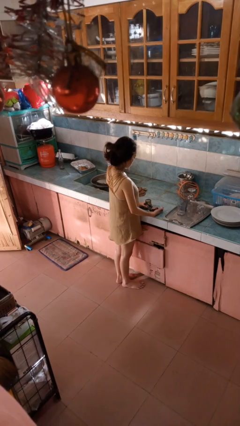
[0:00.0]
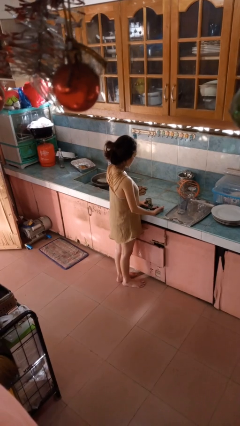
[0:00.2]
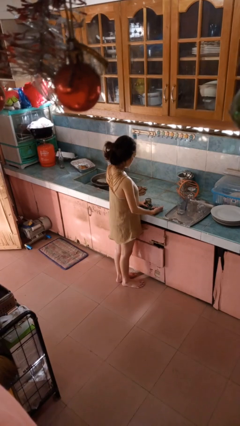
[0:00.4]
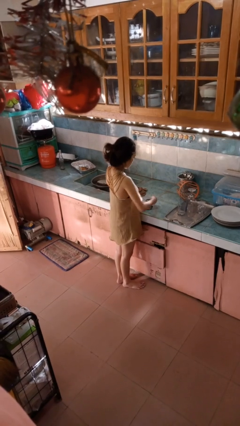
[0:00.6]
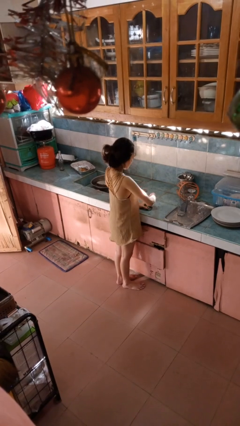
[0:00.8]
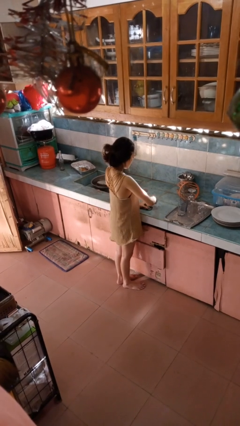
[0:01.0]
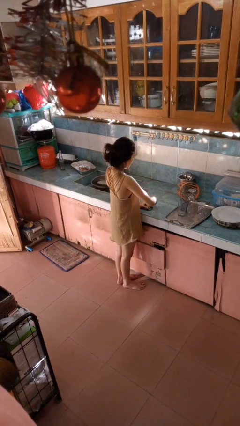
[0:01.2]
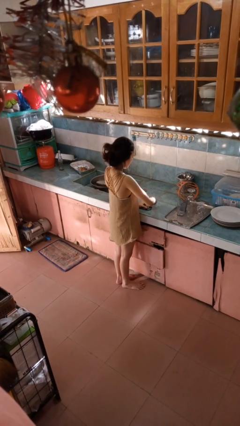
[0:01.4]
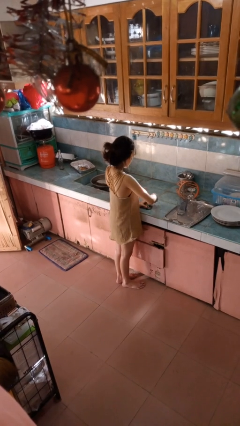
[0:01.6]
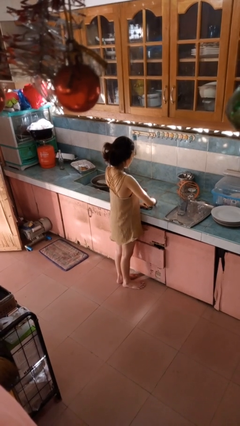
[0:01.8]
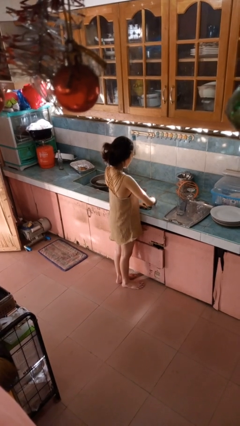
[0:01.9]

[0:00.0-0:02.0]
person opens can with can opener
